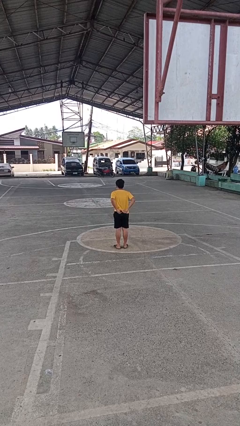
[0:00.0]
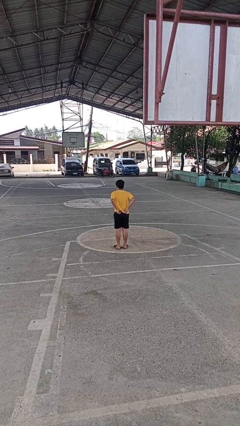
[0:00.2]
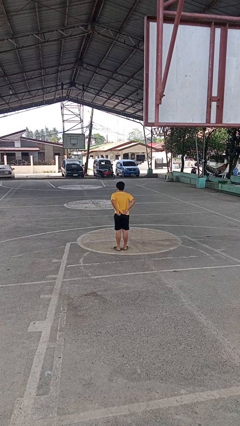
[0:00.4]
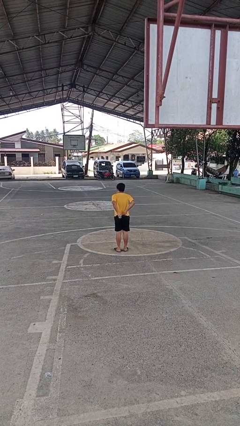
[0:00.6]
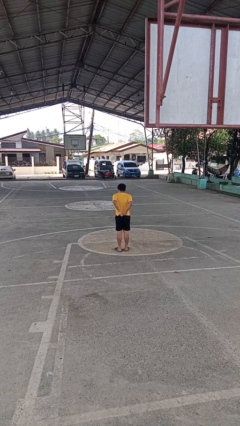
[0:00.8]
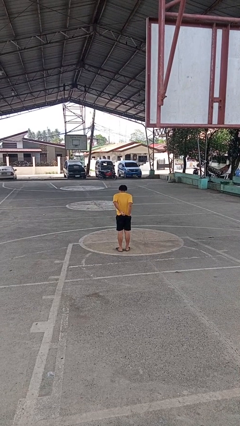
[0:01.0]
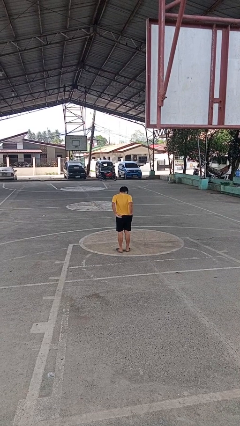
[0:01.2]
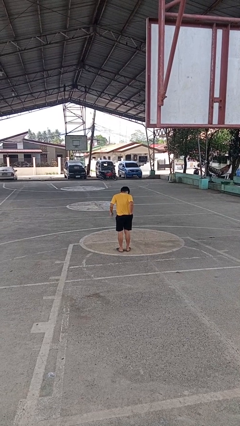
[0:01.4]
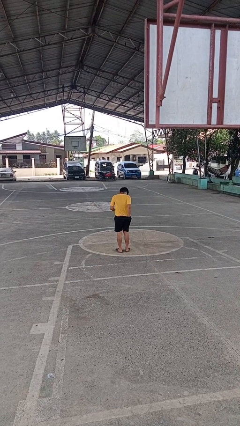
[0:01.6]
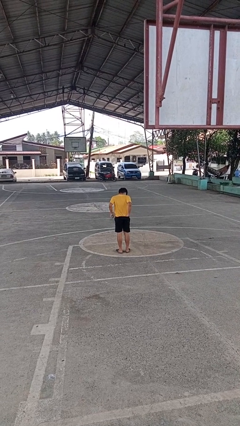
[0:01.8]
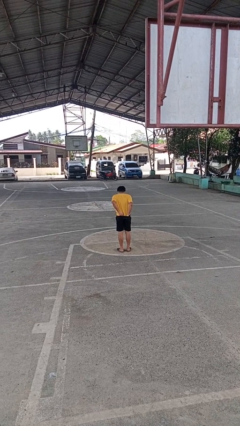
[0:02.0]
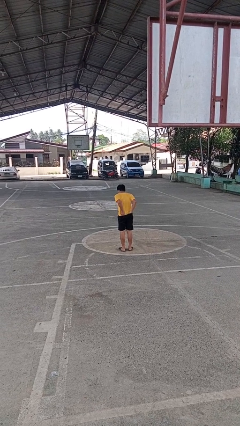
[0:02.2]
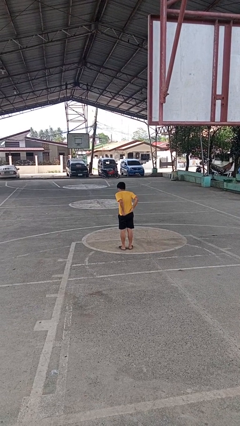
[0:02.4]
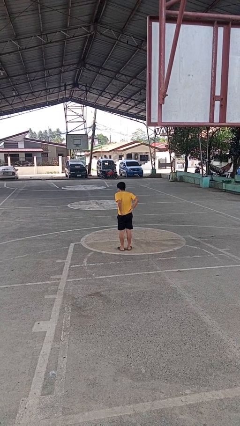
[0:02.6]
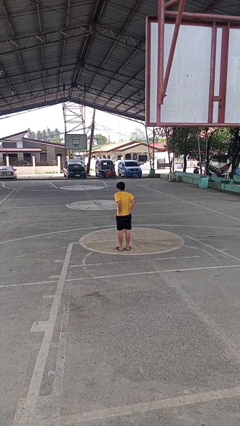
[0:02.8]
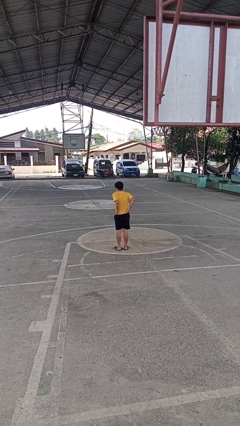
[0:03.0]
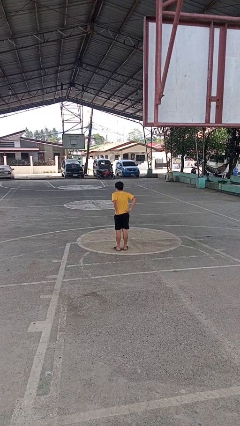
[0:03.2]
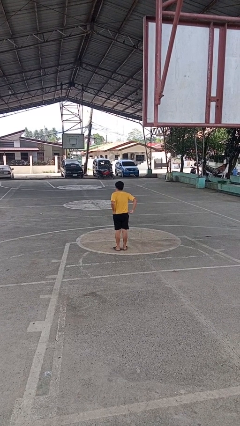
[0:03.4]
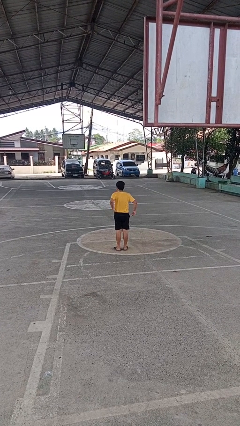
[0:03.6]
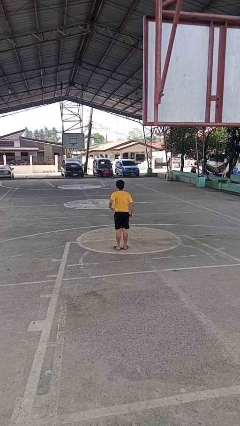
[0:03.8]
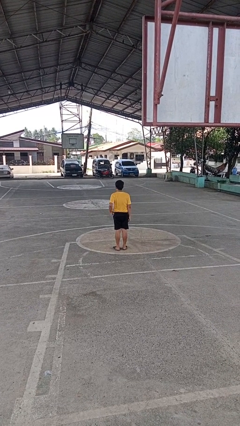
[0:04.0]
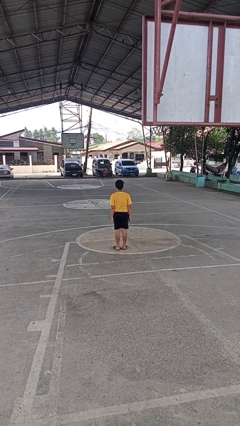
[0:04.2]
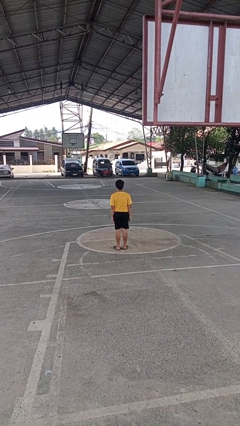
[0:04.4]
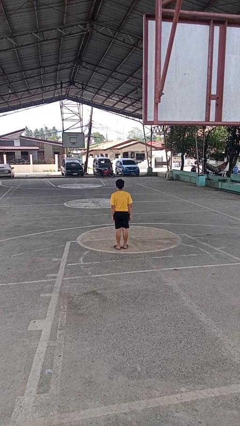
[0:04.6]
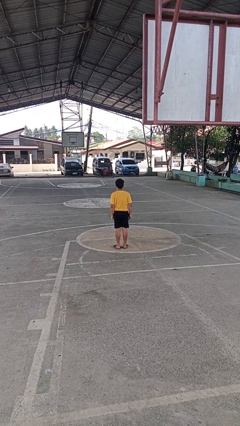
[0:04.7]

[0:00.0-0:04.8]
person tucks in shirt

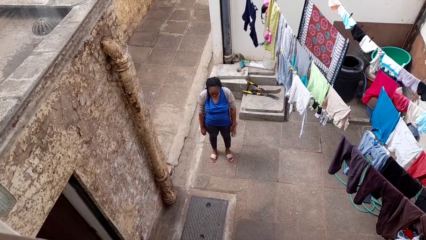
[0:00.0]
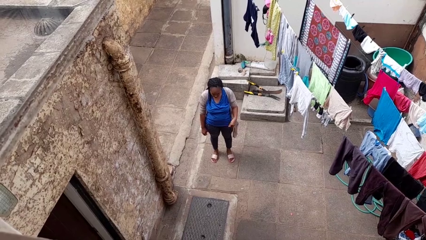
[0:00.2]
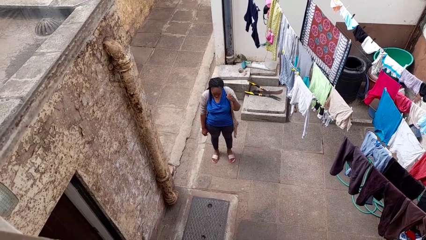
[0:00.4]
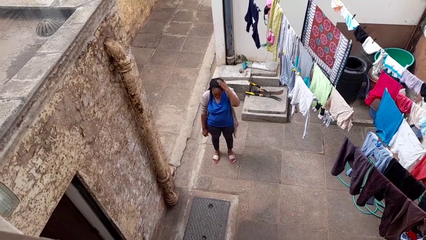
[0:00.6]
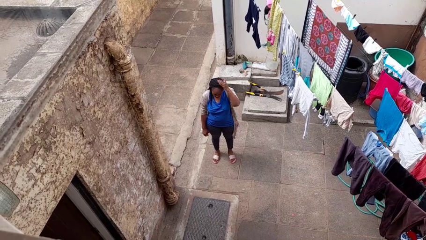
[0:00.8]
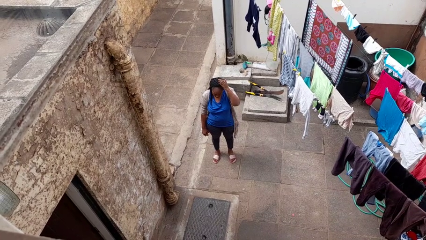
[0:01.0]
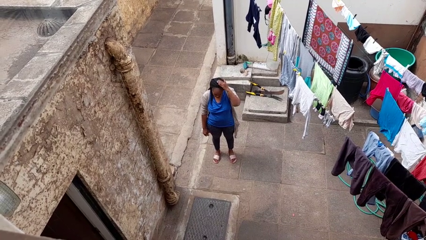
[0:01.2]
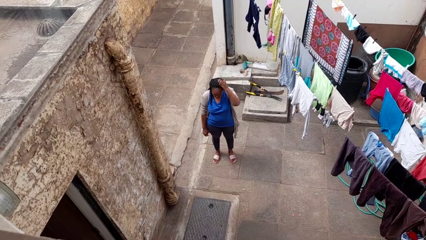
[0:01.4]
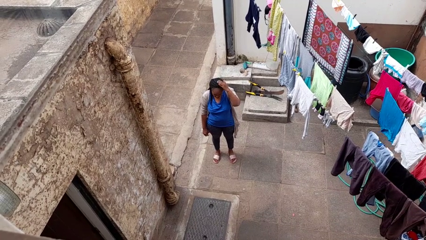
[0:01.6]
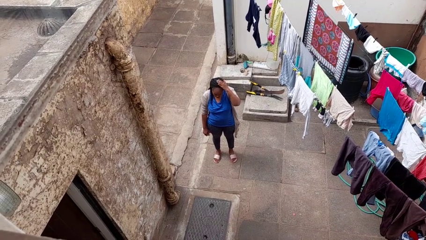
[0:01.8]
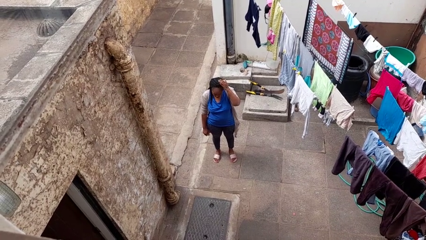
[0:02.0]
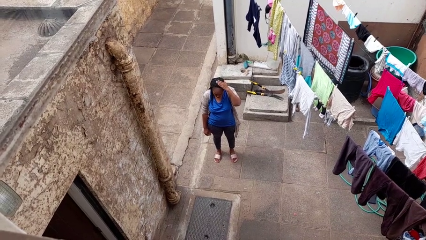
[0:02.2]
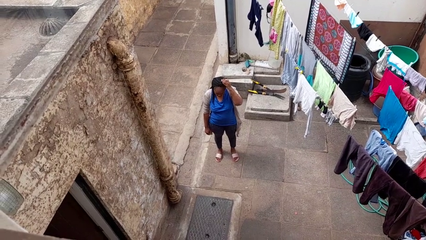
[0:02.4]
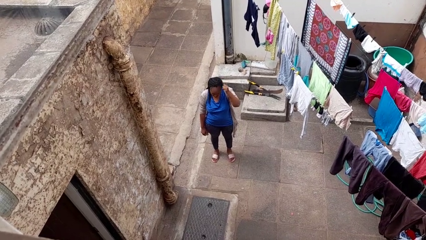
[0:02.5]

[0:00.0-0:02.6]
person pats head

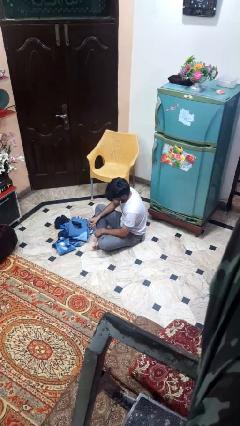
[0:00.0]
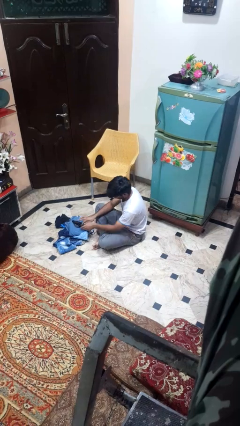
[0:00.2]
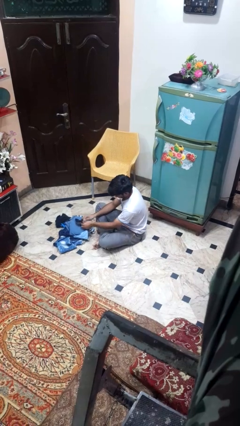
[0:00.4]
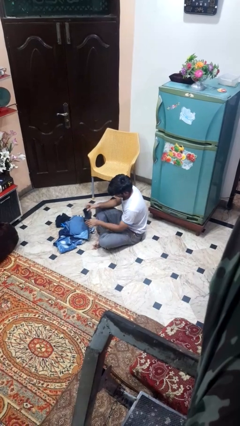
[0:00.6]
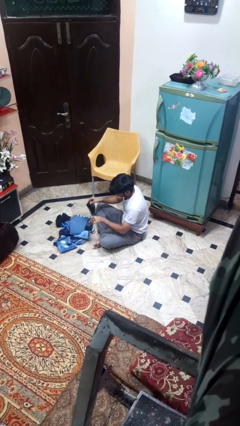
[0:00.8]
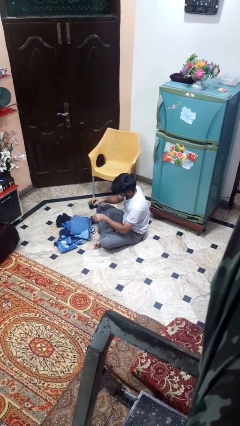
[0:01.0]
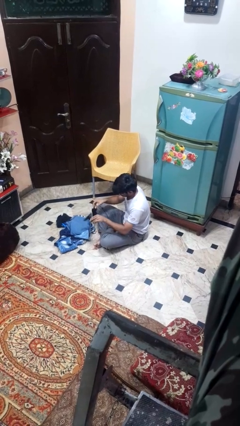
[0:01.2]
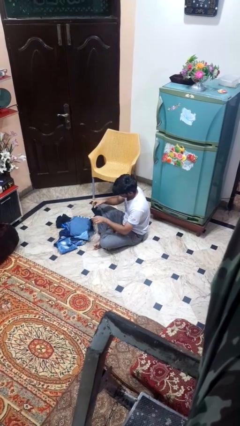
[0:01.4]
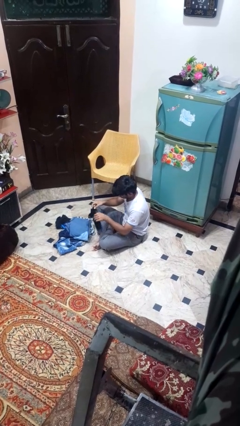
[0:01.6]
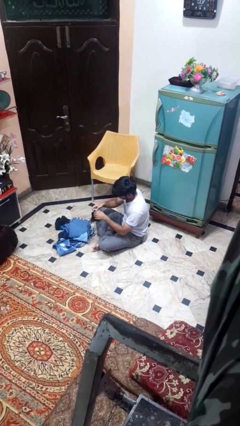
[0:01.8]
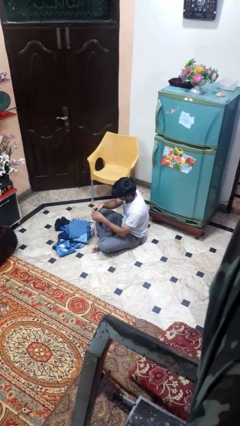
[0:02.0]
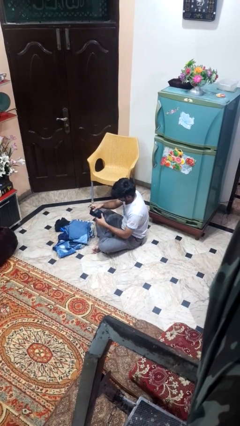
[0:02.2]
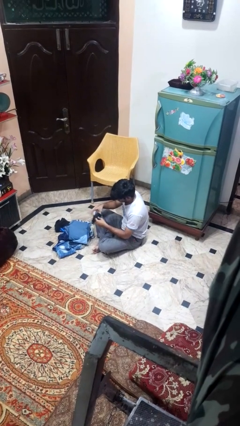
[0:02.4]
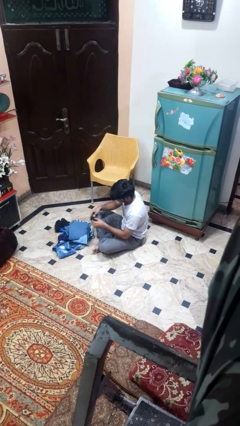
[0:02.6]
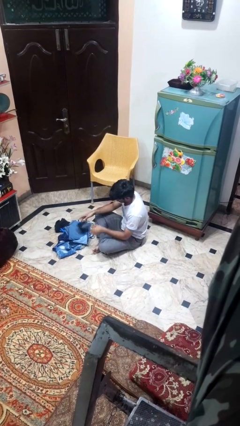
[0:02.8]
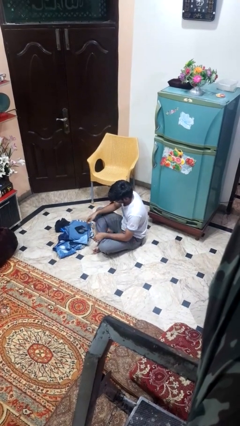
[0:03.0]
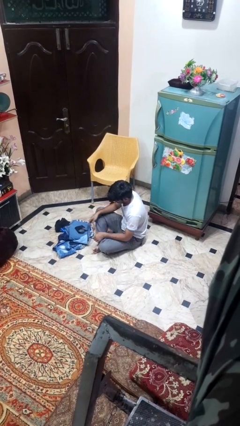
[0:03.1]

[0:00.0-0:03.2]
person folds socks

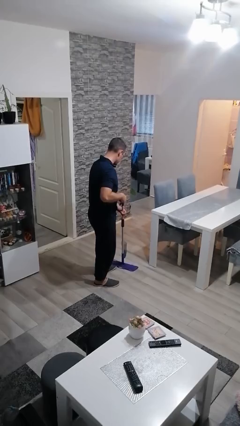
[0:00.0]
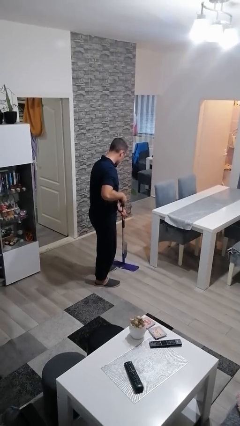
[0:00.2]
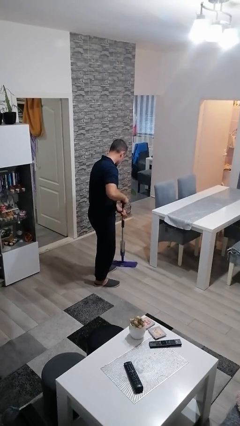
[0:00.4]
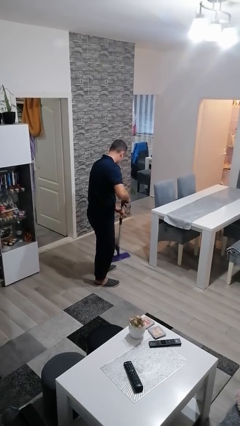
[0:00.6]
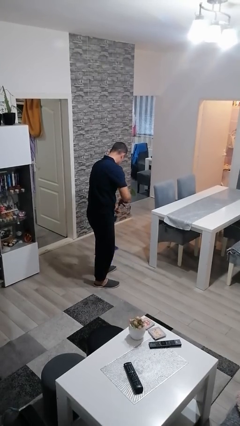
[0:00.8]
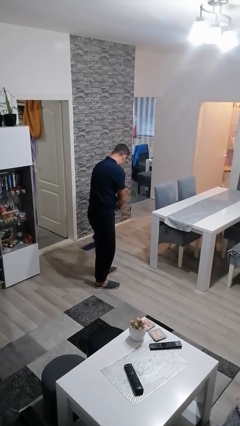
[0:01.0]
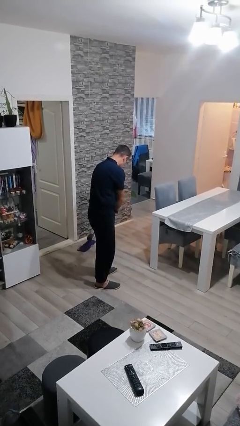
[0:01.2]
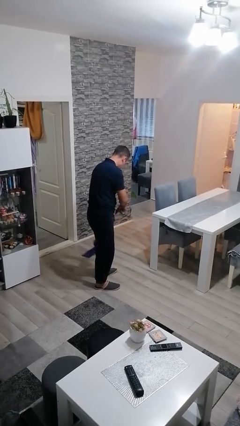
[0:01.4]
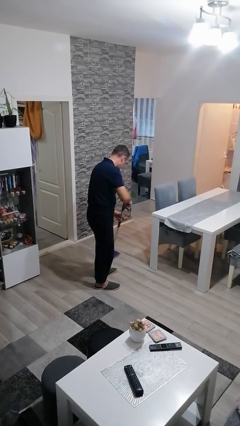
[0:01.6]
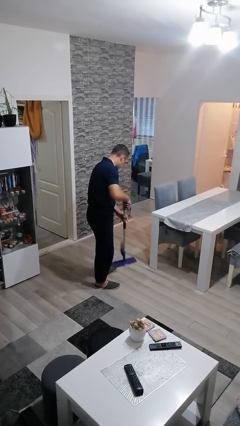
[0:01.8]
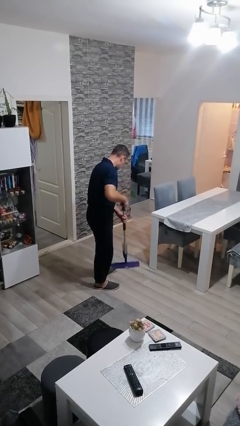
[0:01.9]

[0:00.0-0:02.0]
person mops

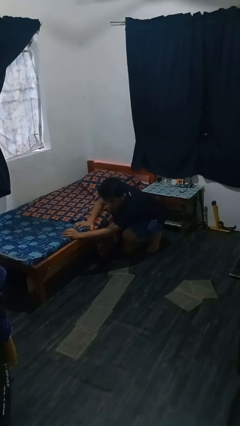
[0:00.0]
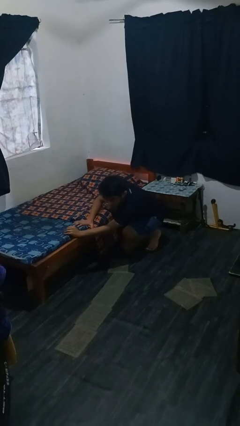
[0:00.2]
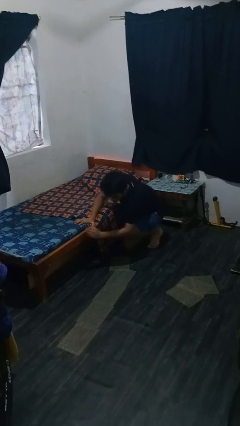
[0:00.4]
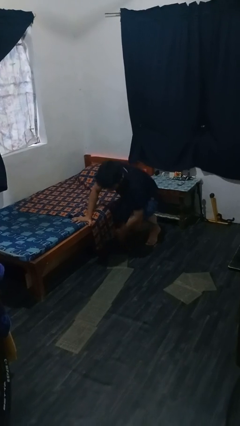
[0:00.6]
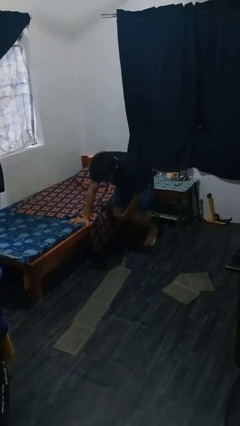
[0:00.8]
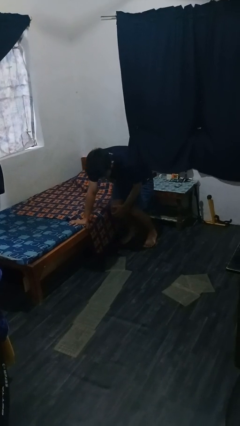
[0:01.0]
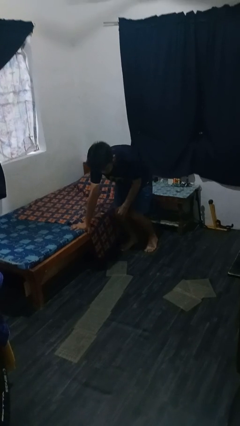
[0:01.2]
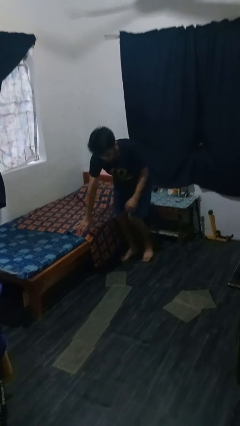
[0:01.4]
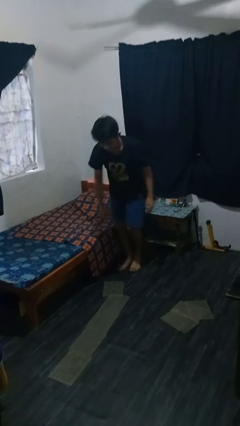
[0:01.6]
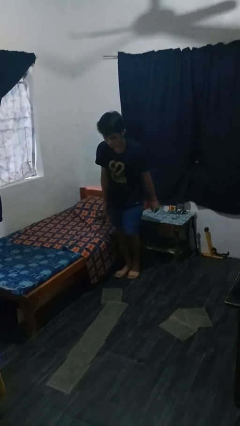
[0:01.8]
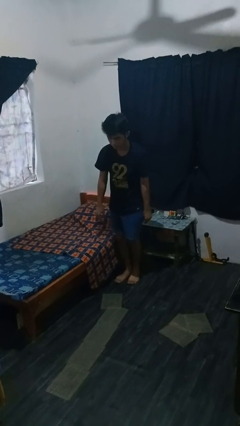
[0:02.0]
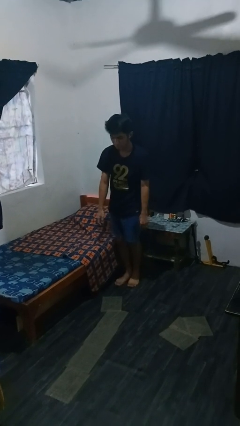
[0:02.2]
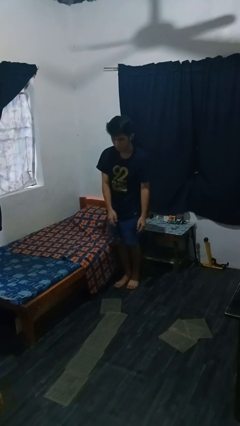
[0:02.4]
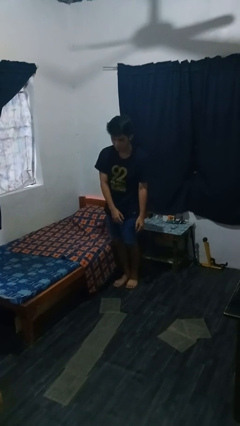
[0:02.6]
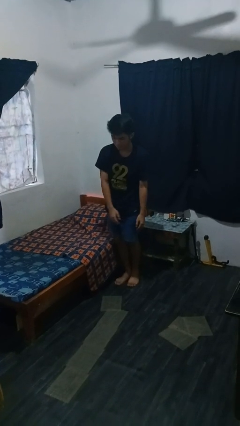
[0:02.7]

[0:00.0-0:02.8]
person stands up from floor

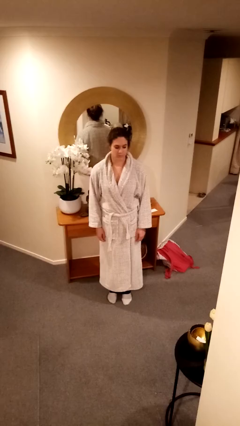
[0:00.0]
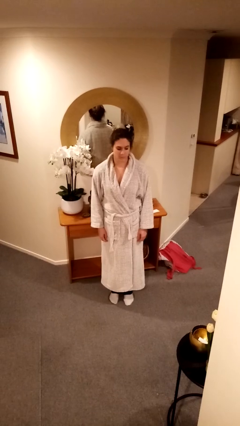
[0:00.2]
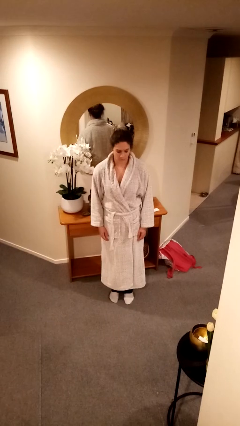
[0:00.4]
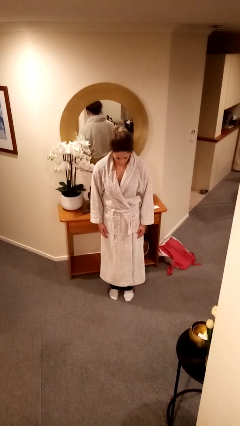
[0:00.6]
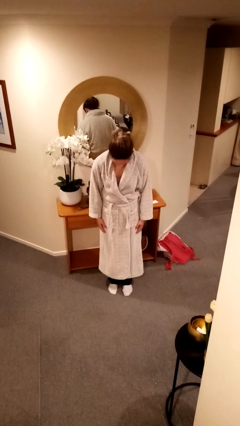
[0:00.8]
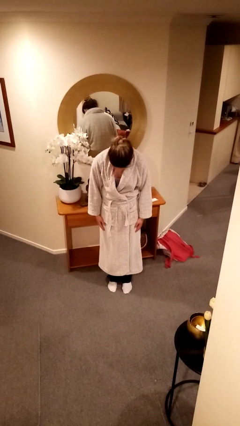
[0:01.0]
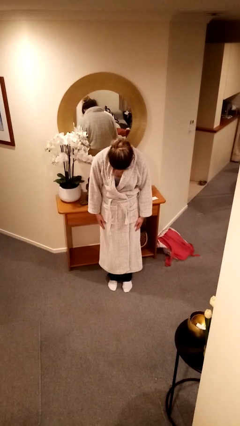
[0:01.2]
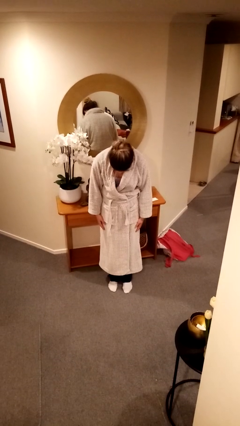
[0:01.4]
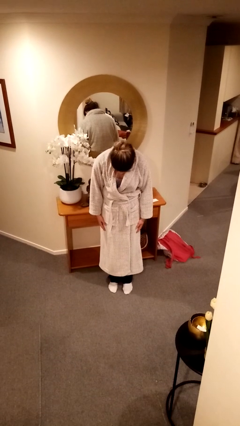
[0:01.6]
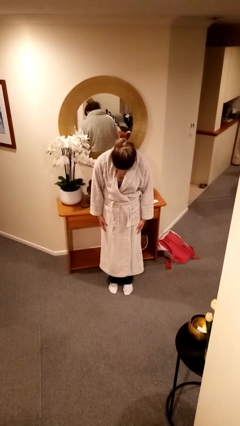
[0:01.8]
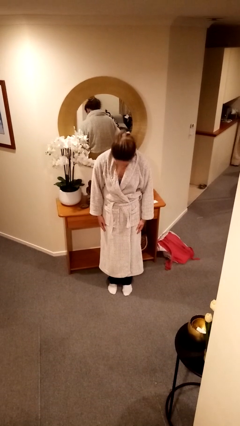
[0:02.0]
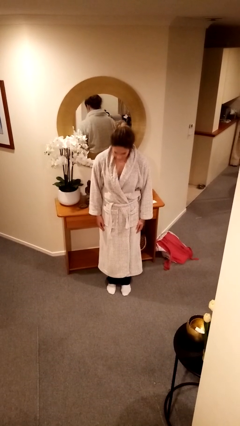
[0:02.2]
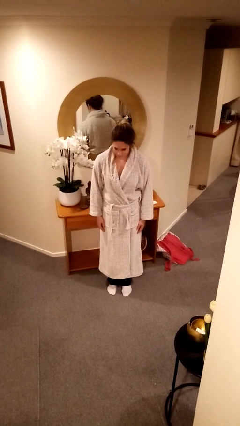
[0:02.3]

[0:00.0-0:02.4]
person bows
